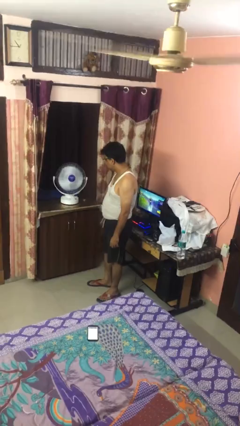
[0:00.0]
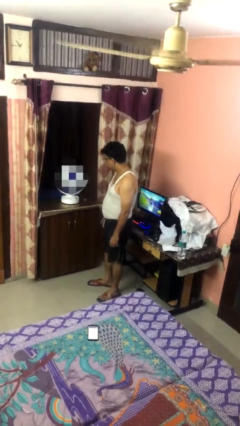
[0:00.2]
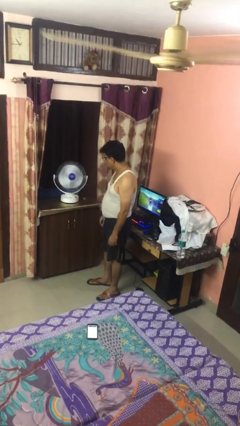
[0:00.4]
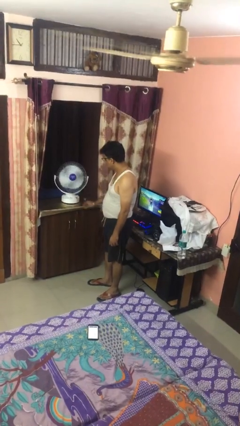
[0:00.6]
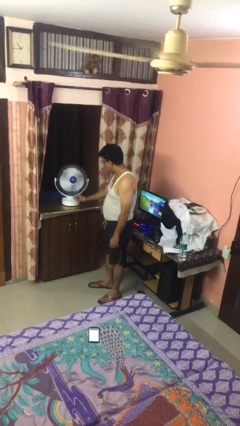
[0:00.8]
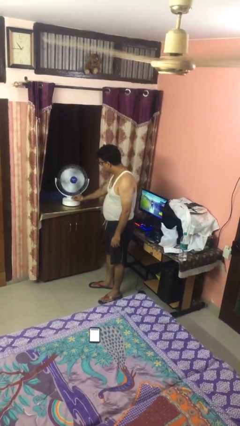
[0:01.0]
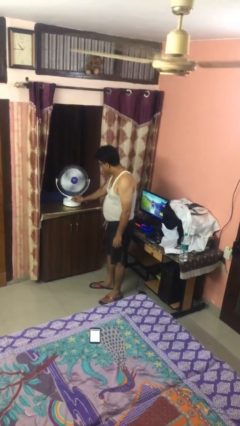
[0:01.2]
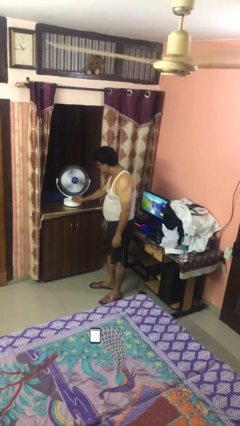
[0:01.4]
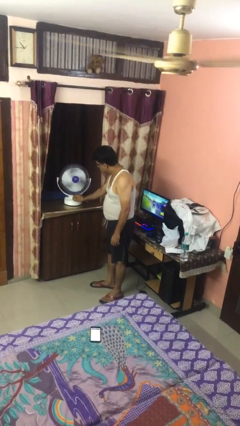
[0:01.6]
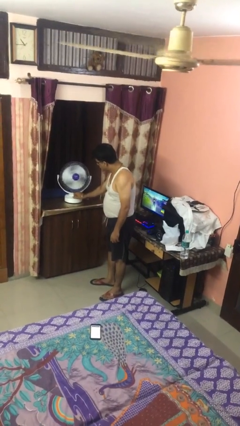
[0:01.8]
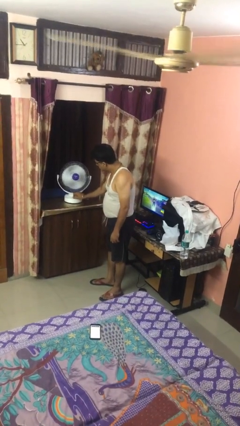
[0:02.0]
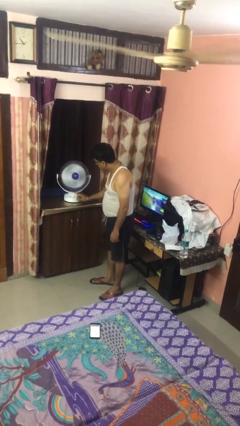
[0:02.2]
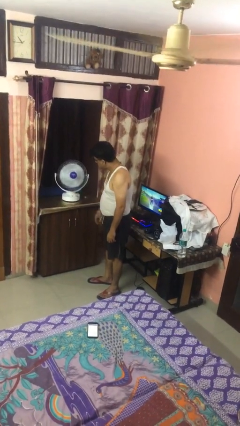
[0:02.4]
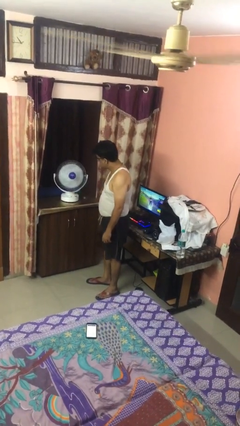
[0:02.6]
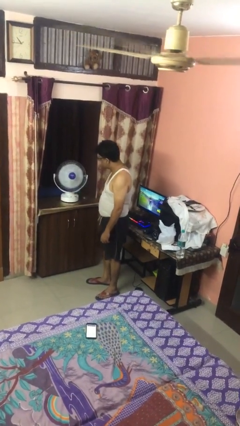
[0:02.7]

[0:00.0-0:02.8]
person turns on fan

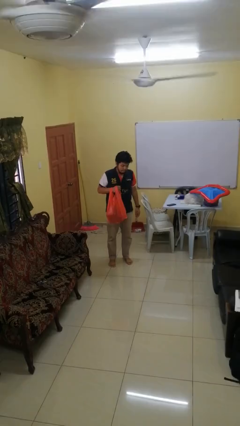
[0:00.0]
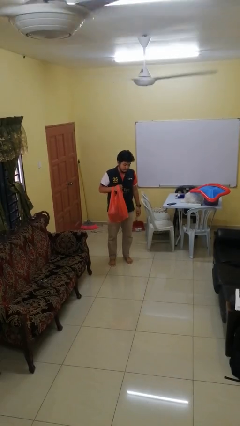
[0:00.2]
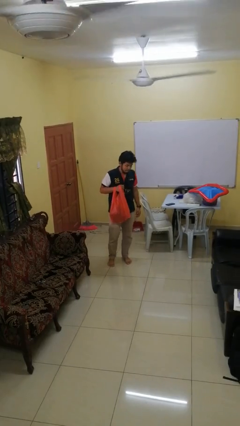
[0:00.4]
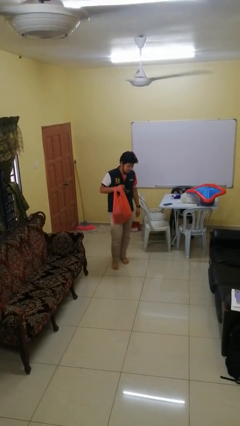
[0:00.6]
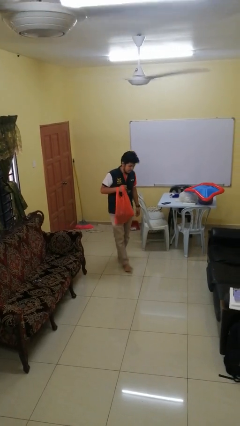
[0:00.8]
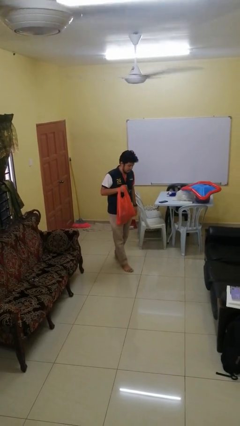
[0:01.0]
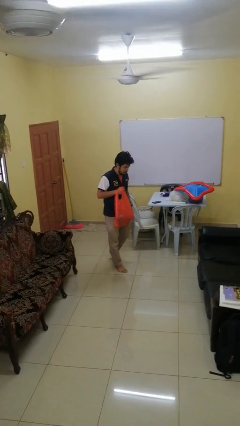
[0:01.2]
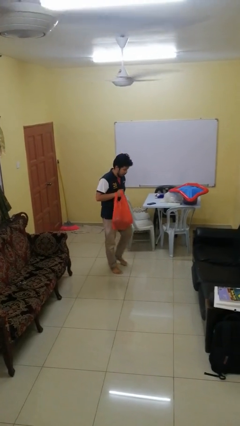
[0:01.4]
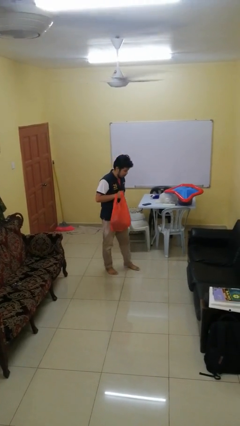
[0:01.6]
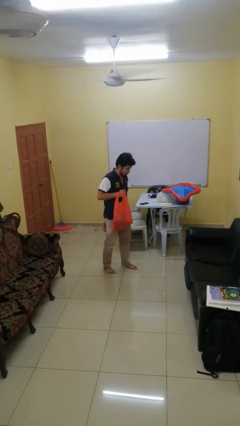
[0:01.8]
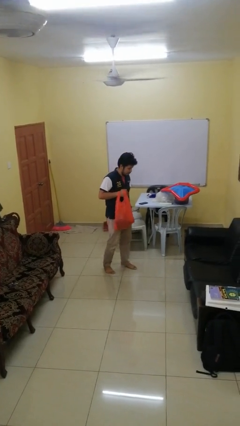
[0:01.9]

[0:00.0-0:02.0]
person carries groceries

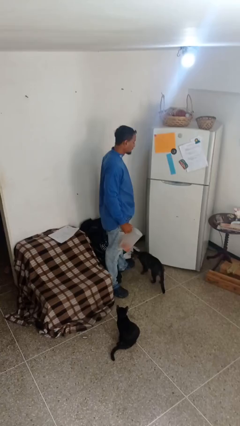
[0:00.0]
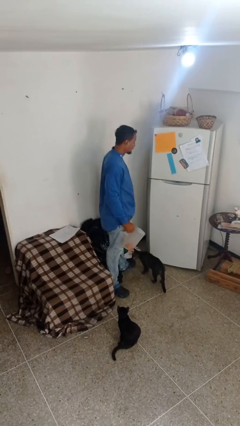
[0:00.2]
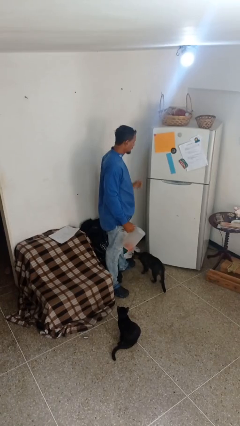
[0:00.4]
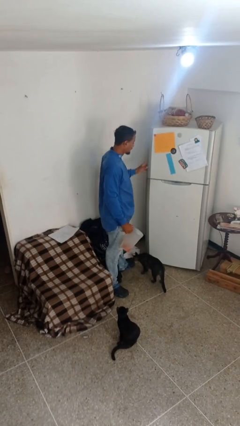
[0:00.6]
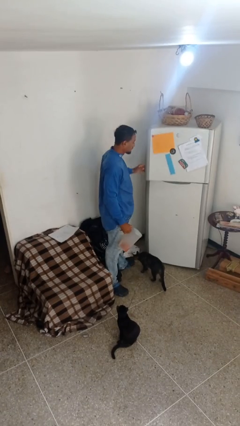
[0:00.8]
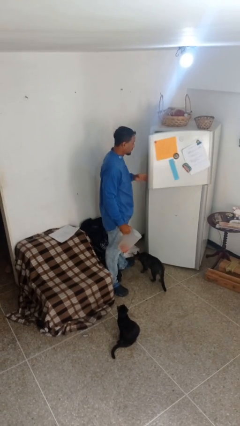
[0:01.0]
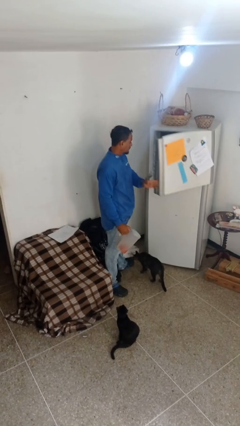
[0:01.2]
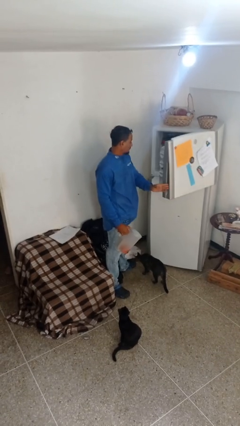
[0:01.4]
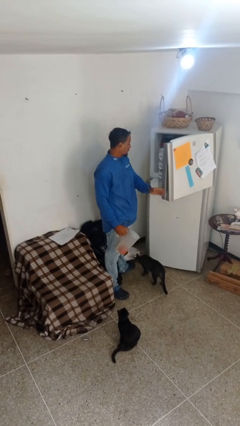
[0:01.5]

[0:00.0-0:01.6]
person opens refrigerator

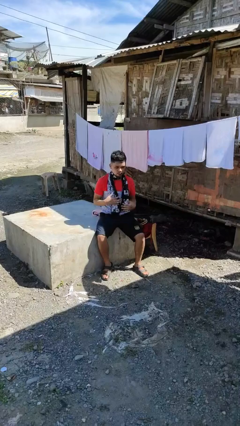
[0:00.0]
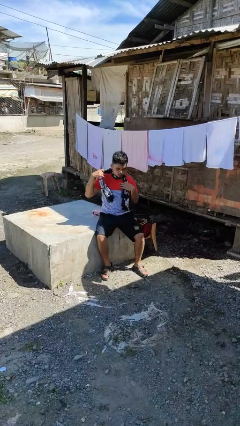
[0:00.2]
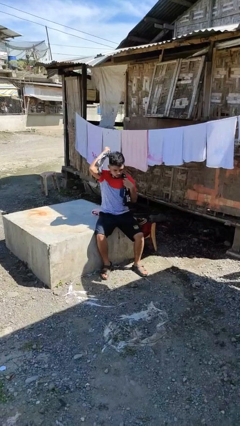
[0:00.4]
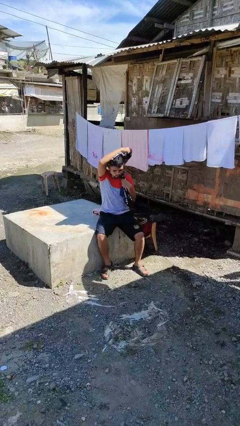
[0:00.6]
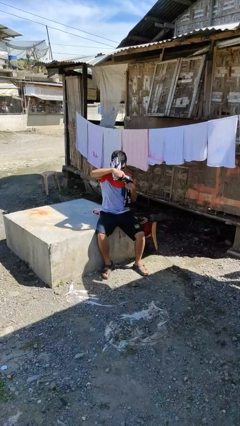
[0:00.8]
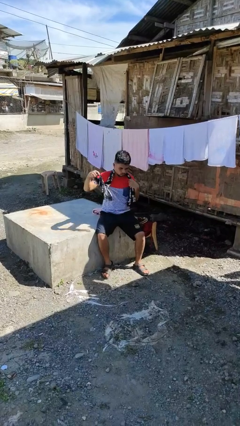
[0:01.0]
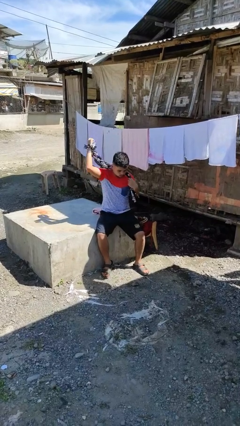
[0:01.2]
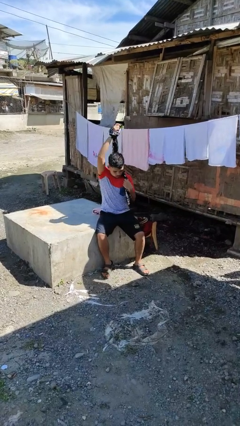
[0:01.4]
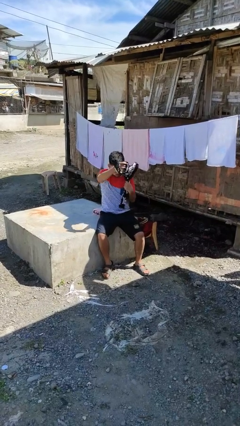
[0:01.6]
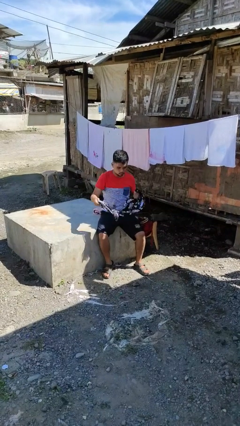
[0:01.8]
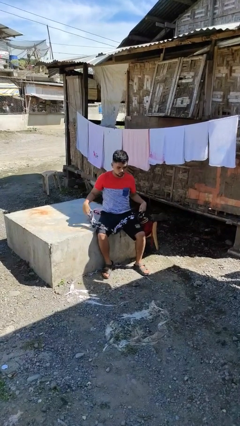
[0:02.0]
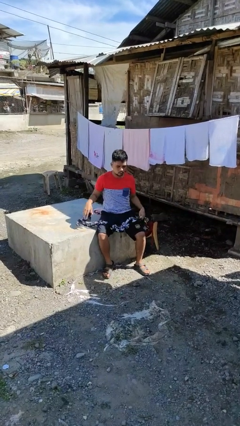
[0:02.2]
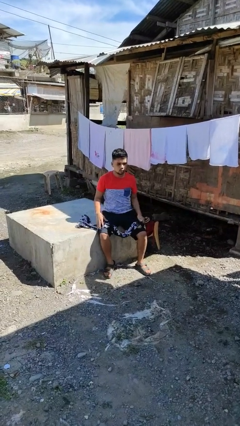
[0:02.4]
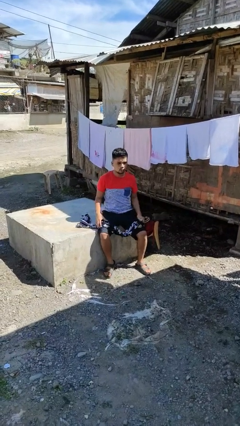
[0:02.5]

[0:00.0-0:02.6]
person takes off scarf

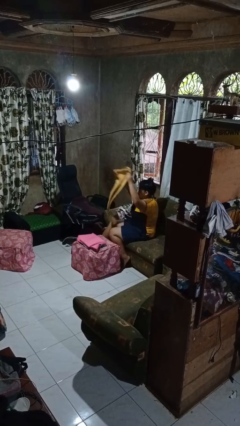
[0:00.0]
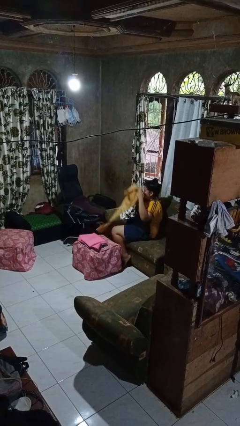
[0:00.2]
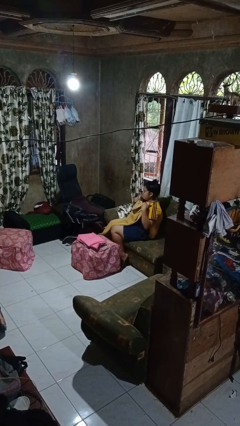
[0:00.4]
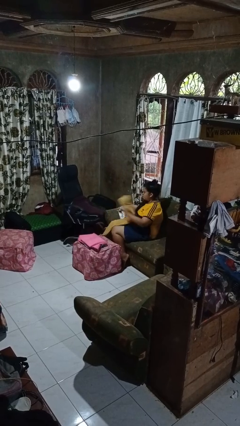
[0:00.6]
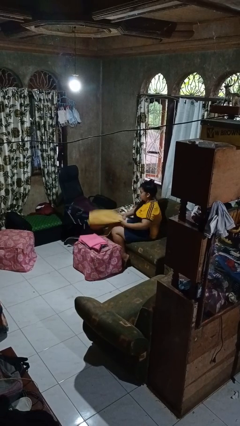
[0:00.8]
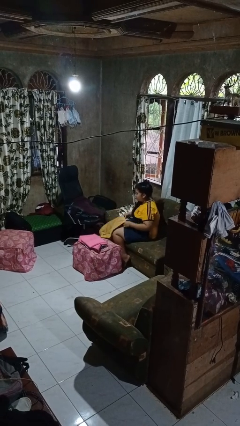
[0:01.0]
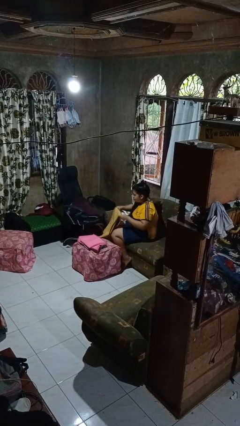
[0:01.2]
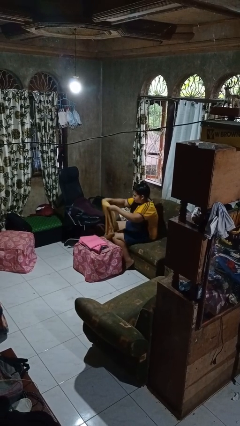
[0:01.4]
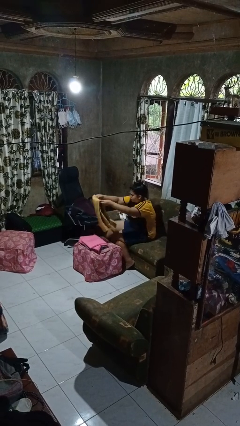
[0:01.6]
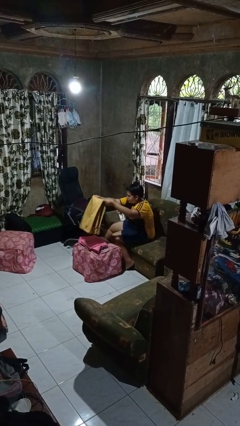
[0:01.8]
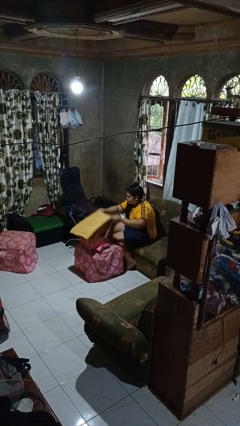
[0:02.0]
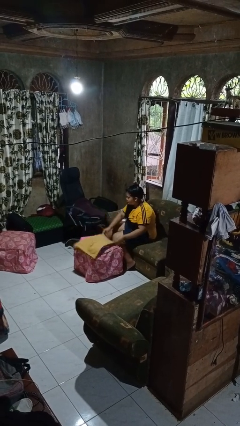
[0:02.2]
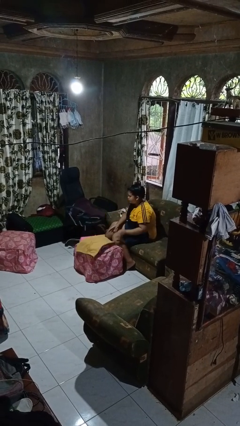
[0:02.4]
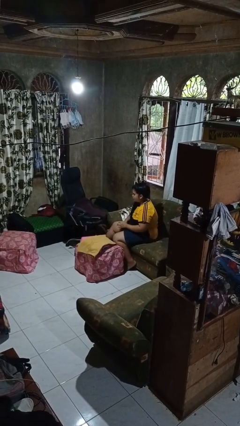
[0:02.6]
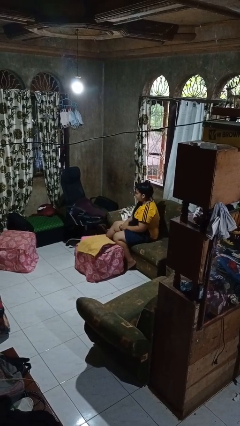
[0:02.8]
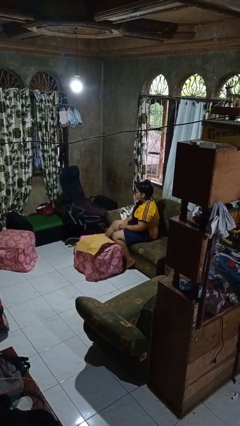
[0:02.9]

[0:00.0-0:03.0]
person folds pants

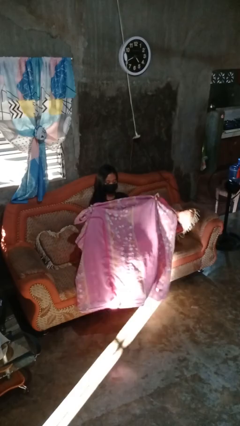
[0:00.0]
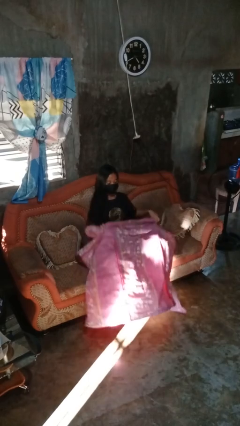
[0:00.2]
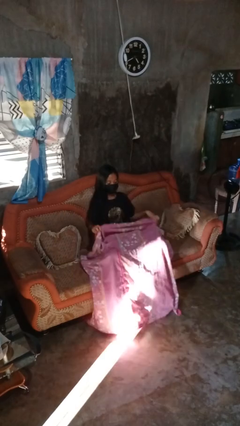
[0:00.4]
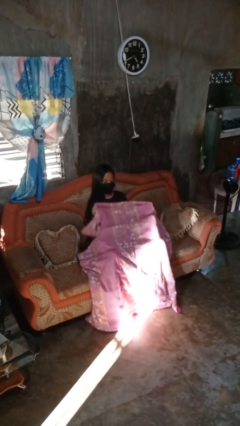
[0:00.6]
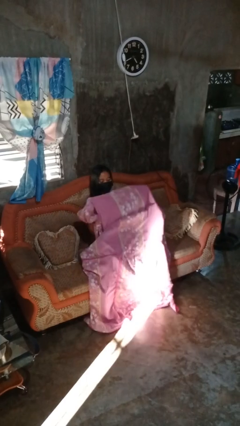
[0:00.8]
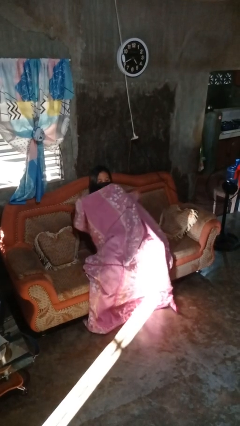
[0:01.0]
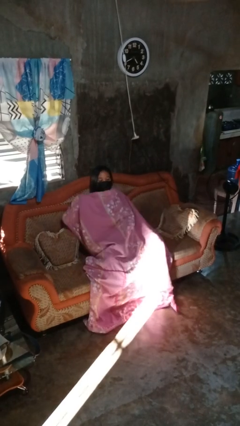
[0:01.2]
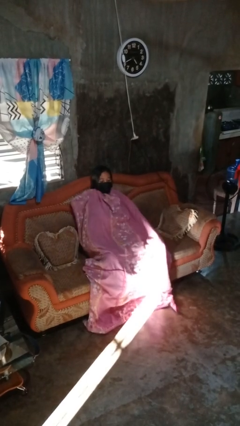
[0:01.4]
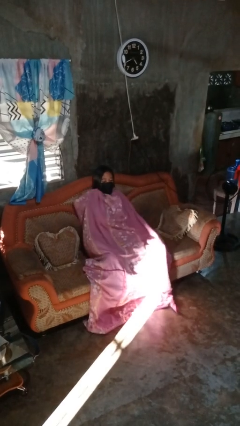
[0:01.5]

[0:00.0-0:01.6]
person covers with blanket

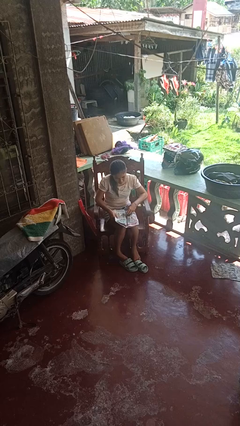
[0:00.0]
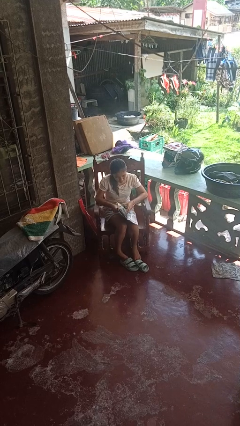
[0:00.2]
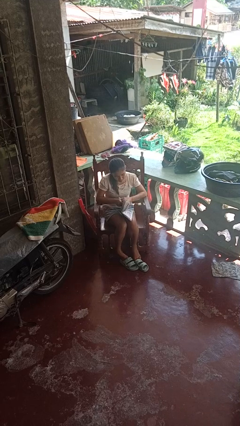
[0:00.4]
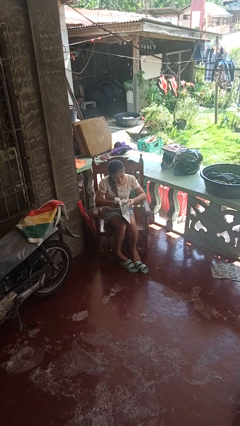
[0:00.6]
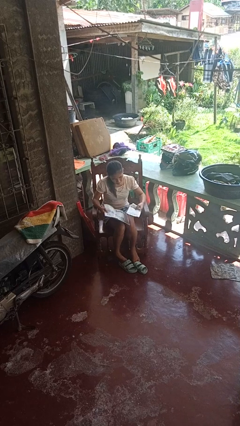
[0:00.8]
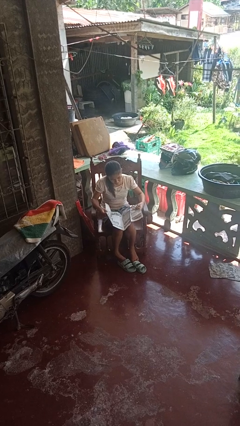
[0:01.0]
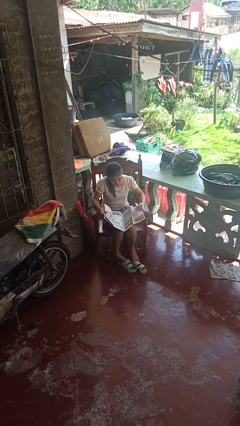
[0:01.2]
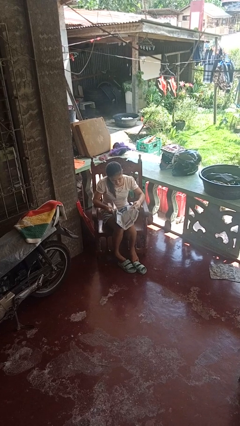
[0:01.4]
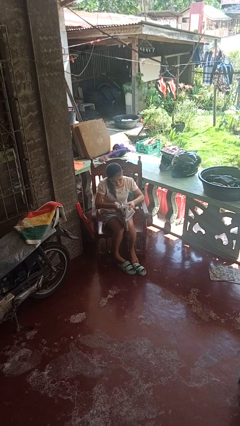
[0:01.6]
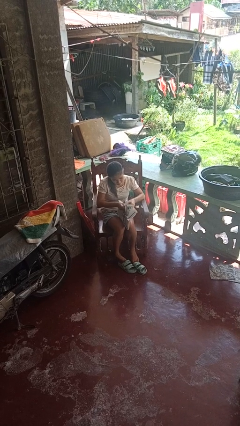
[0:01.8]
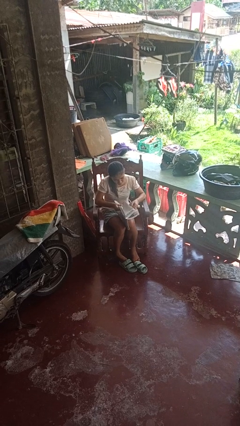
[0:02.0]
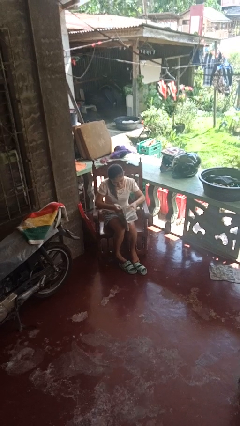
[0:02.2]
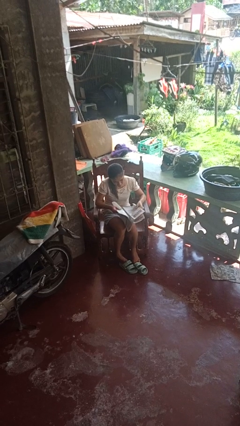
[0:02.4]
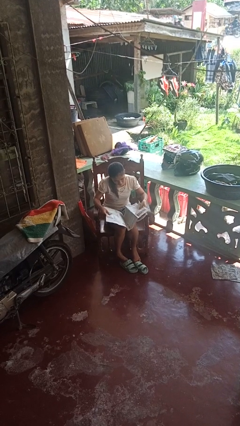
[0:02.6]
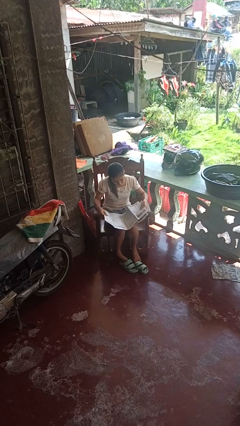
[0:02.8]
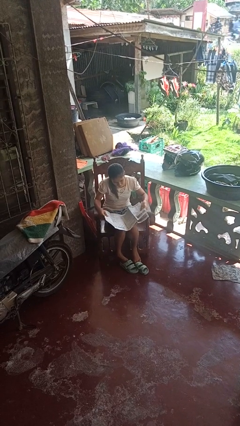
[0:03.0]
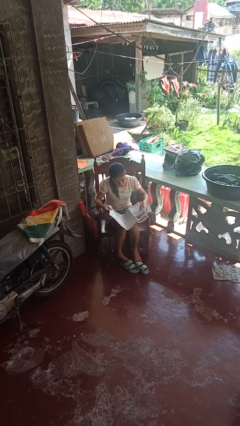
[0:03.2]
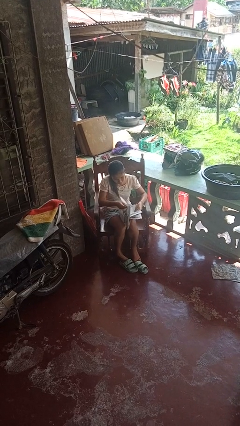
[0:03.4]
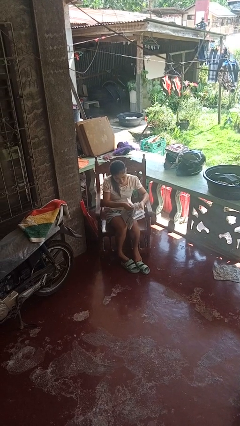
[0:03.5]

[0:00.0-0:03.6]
person reads newspaper
